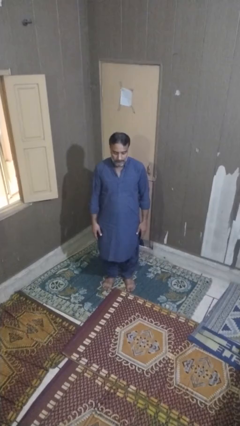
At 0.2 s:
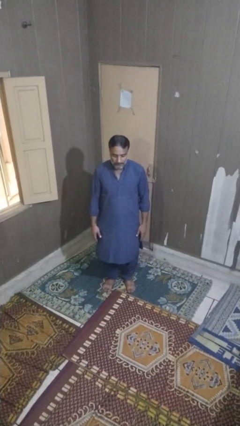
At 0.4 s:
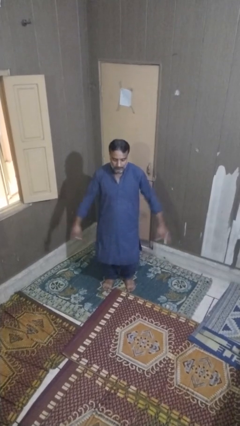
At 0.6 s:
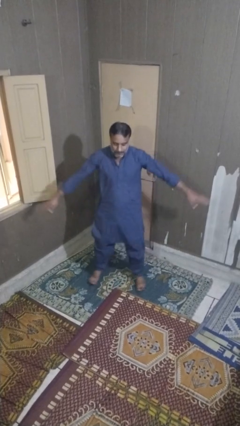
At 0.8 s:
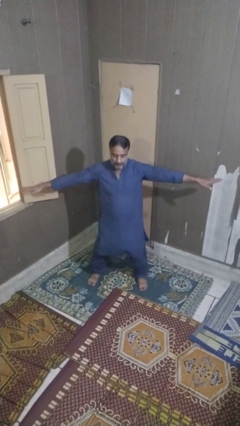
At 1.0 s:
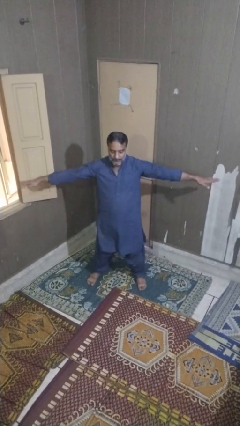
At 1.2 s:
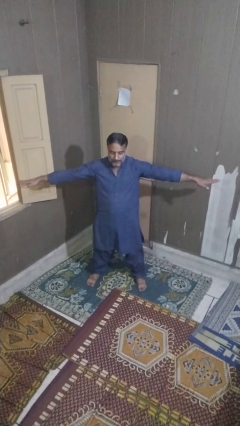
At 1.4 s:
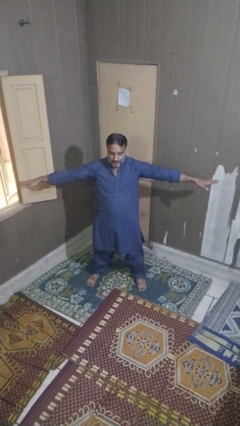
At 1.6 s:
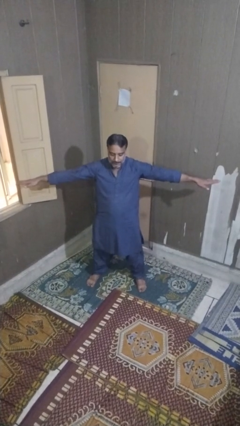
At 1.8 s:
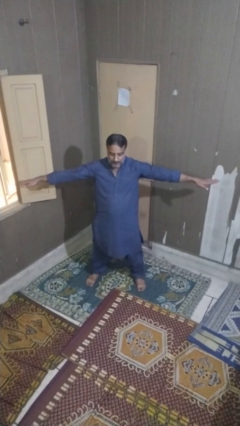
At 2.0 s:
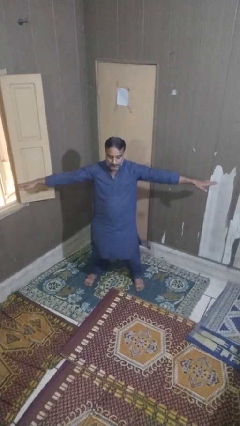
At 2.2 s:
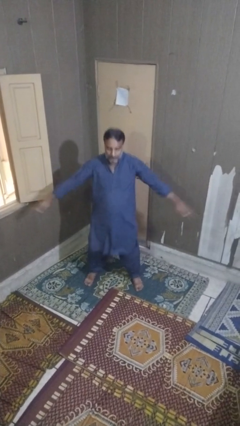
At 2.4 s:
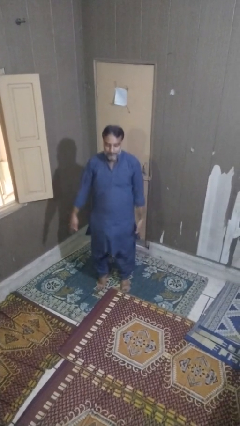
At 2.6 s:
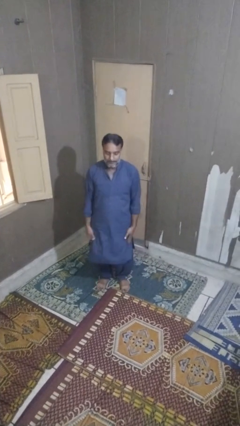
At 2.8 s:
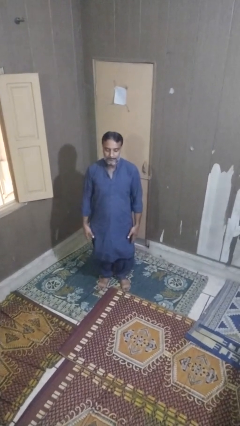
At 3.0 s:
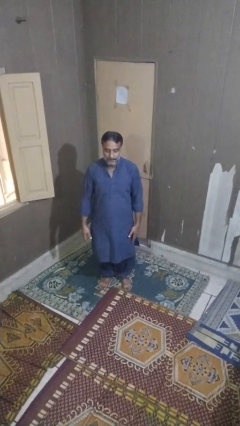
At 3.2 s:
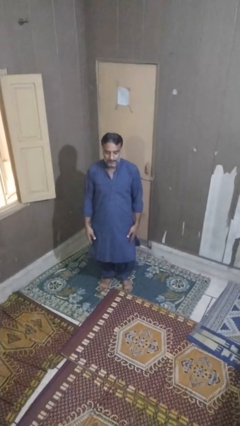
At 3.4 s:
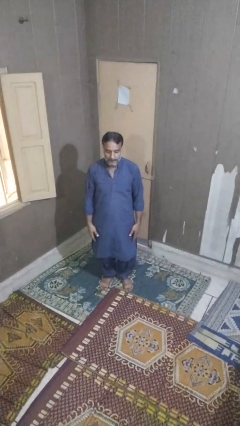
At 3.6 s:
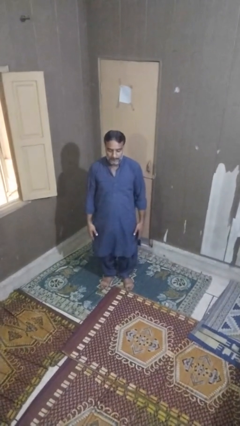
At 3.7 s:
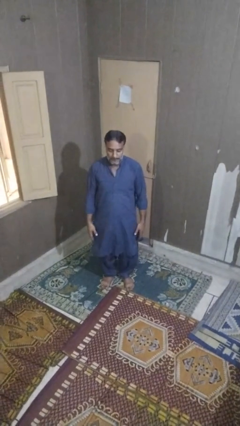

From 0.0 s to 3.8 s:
person exercises with jumping jacks

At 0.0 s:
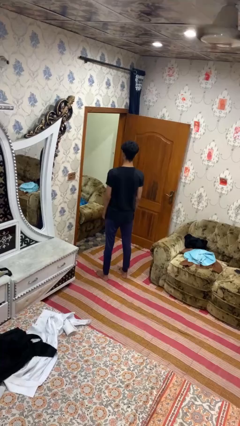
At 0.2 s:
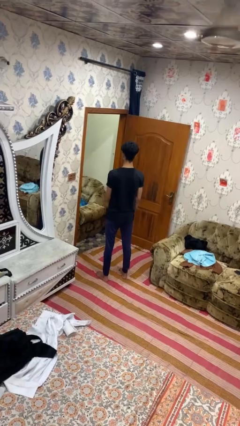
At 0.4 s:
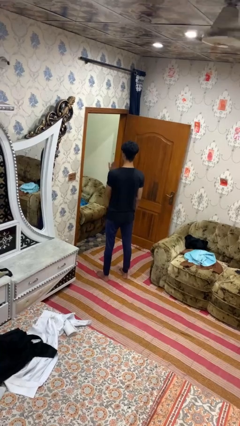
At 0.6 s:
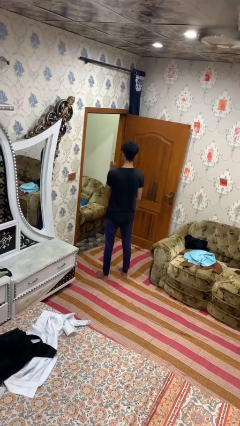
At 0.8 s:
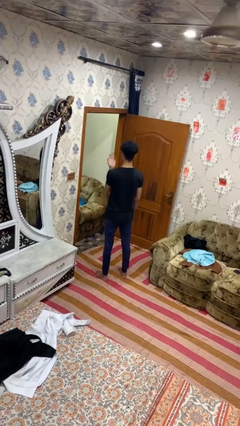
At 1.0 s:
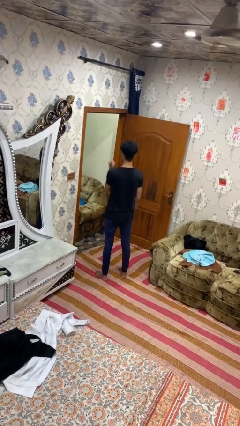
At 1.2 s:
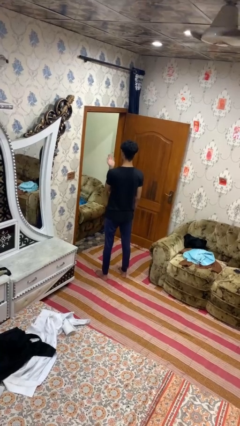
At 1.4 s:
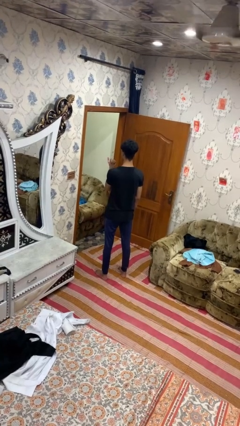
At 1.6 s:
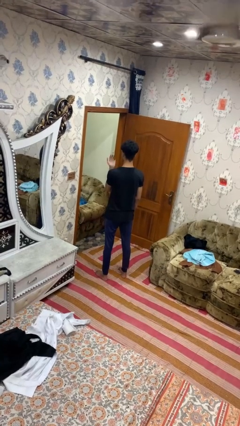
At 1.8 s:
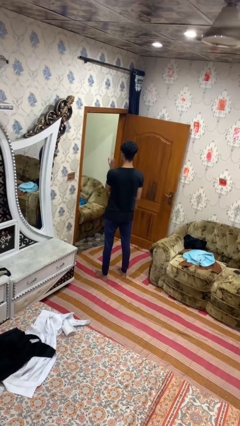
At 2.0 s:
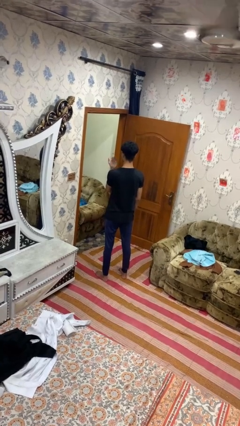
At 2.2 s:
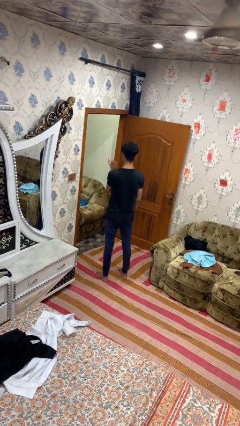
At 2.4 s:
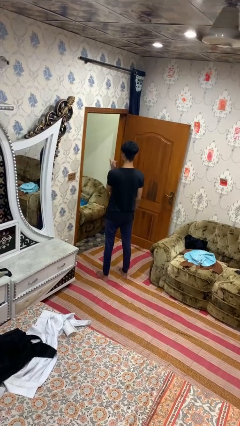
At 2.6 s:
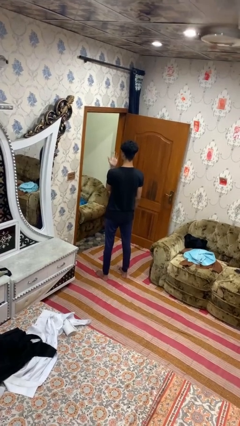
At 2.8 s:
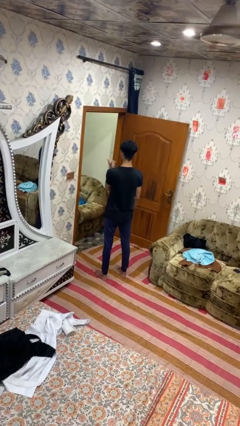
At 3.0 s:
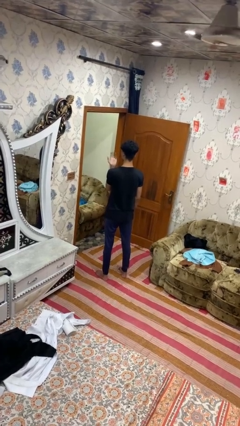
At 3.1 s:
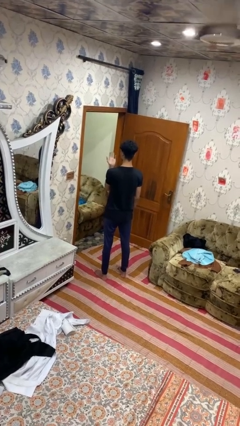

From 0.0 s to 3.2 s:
person gestures listen closely

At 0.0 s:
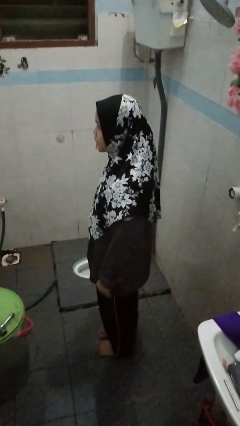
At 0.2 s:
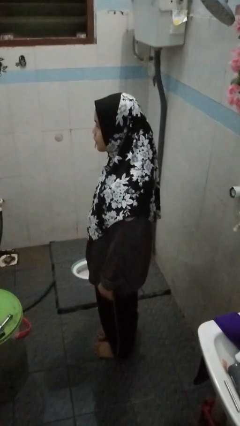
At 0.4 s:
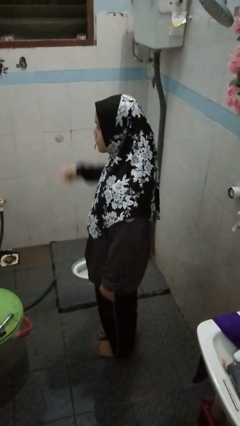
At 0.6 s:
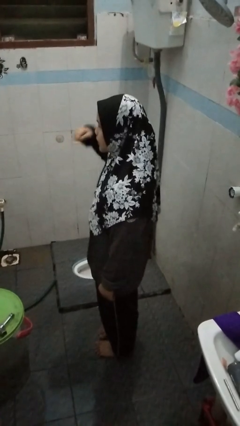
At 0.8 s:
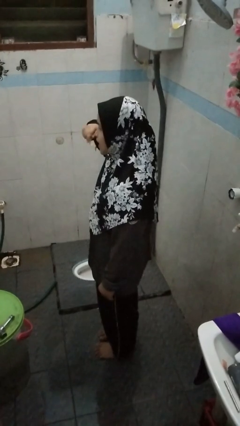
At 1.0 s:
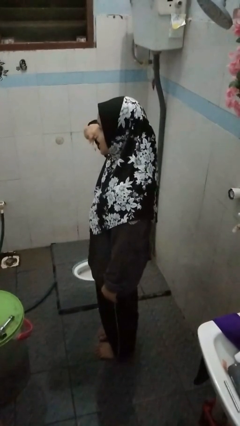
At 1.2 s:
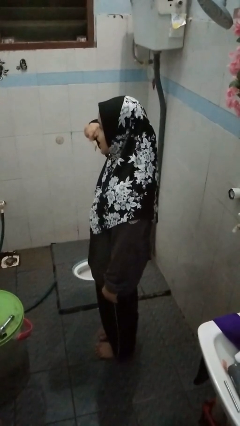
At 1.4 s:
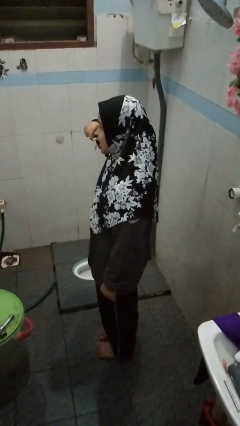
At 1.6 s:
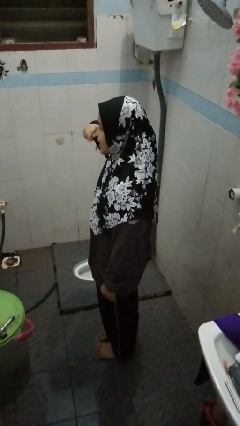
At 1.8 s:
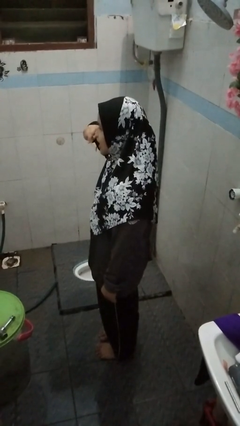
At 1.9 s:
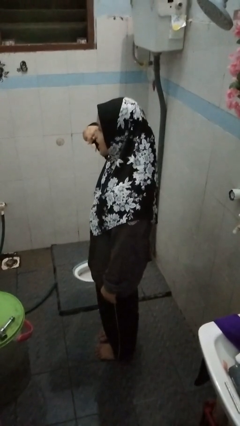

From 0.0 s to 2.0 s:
person brushes teeth

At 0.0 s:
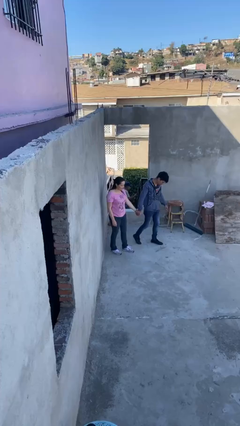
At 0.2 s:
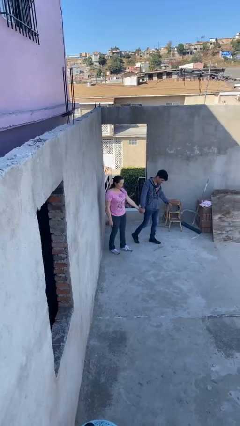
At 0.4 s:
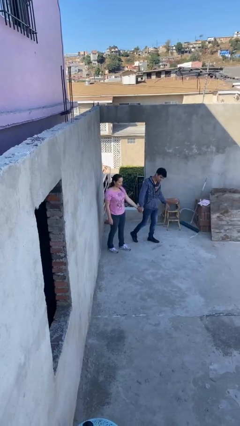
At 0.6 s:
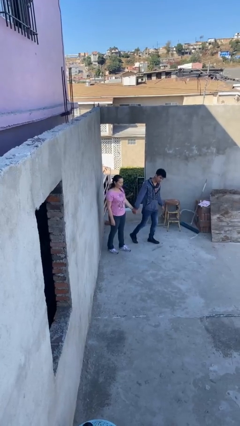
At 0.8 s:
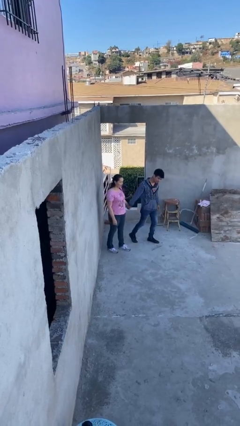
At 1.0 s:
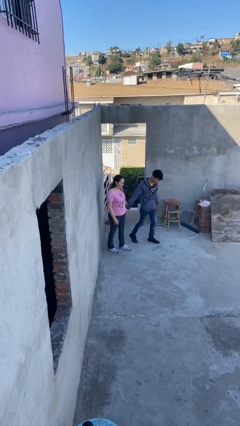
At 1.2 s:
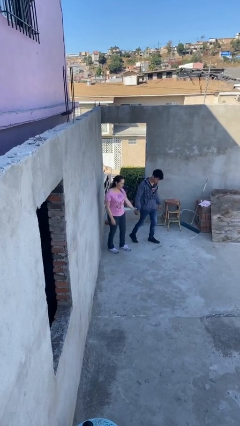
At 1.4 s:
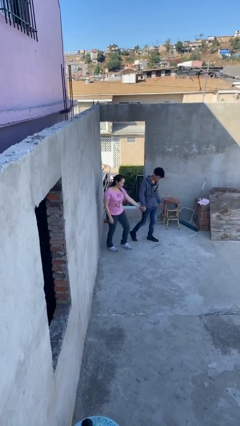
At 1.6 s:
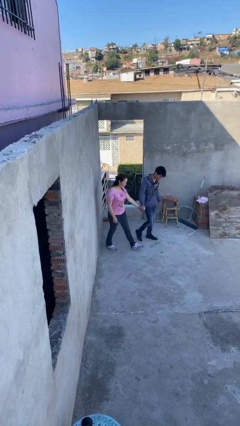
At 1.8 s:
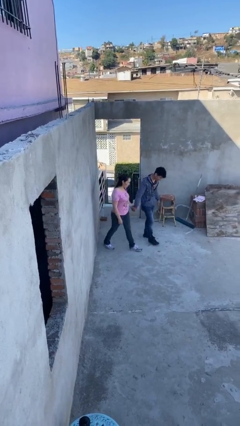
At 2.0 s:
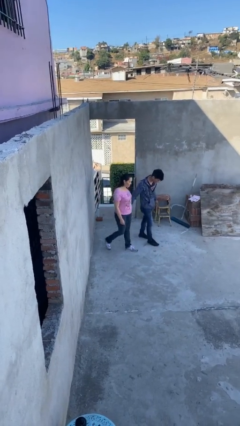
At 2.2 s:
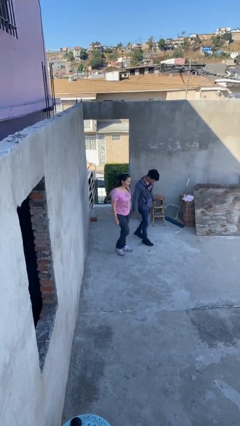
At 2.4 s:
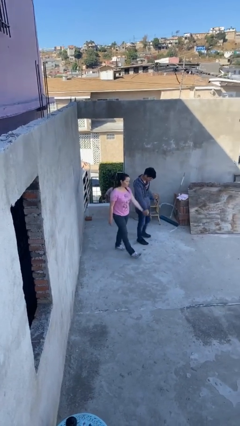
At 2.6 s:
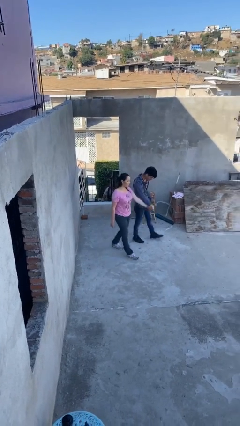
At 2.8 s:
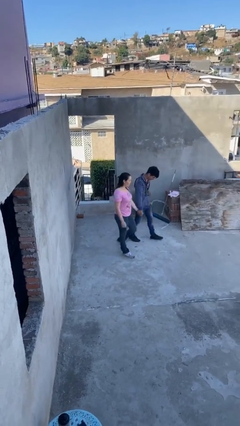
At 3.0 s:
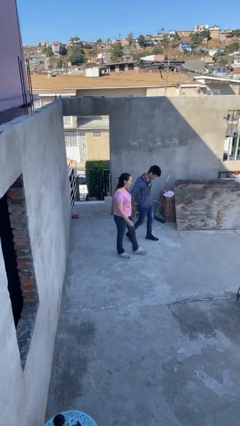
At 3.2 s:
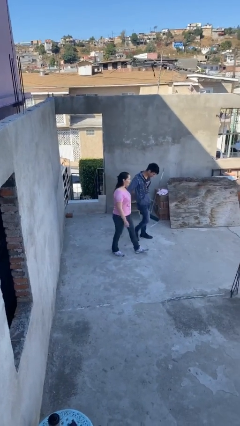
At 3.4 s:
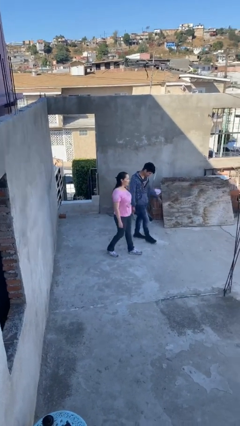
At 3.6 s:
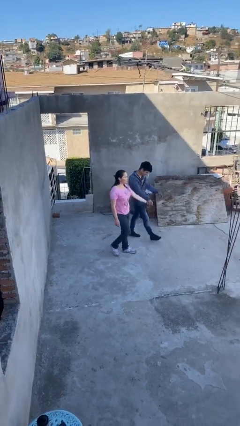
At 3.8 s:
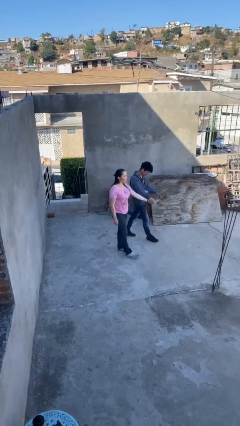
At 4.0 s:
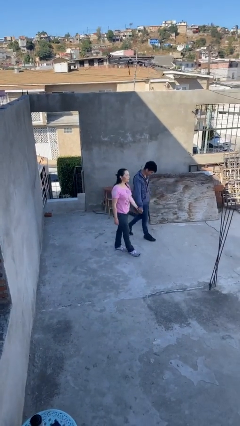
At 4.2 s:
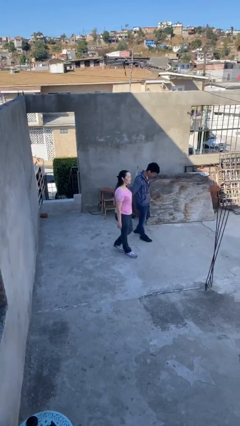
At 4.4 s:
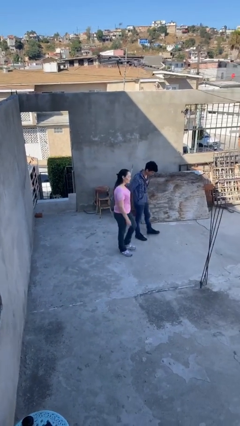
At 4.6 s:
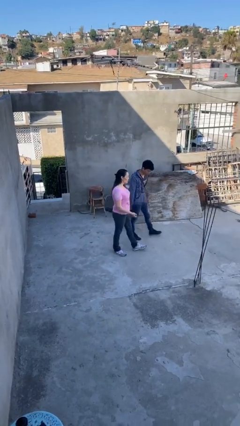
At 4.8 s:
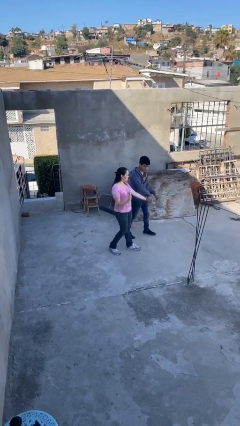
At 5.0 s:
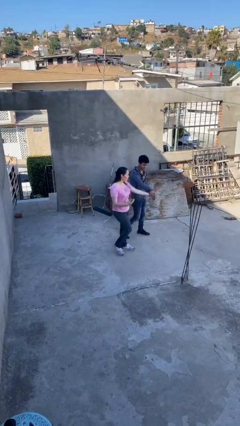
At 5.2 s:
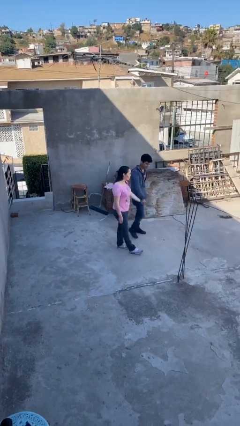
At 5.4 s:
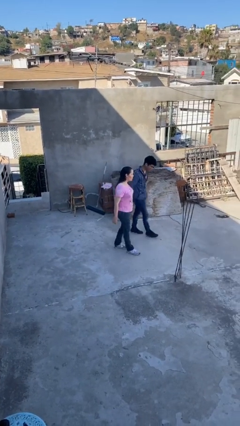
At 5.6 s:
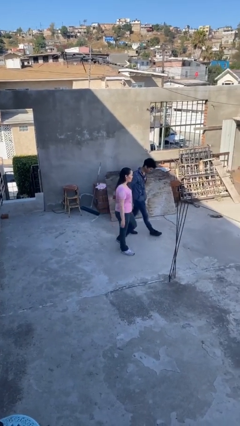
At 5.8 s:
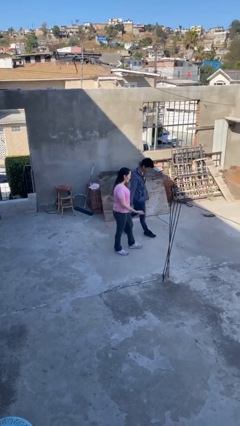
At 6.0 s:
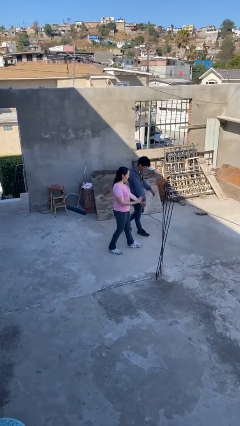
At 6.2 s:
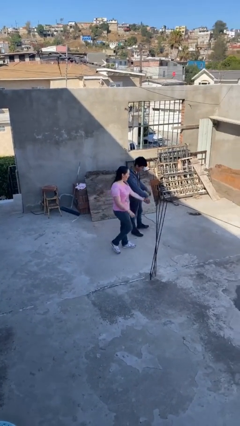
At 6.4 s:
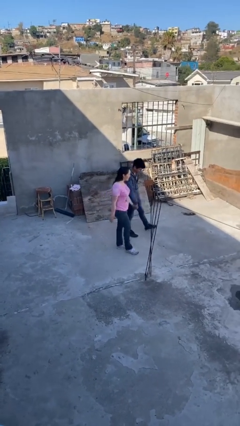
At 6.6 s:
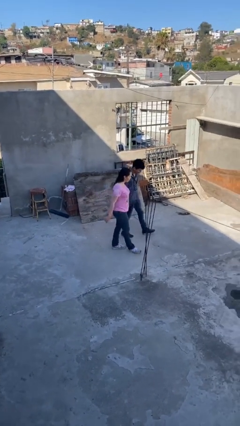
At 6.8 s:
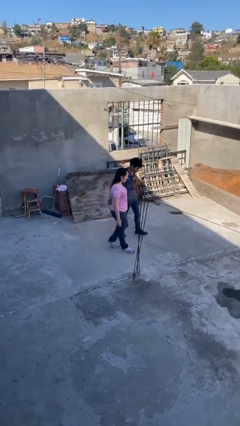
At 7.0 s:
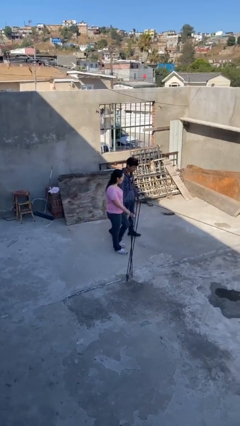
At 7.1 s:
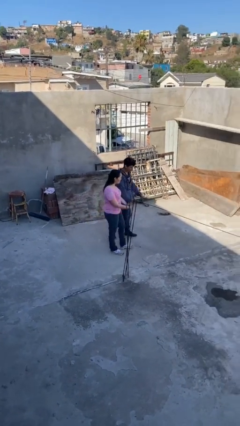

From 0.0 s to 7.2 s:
person holds hand

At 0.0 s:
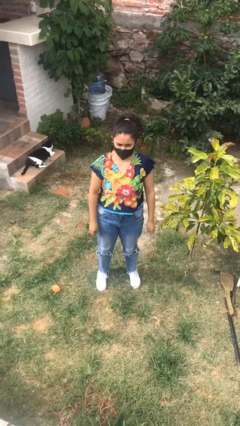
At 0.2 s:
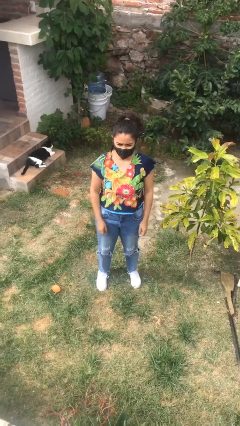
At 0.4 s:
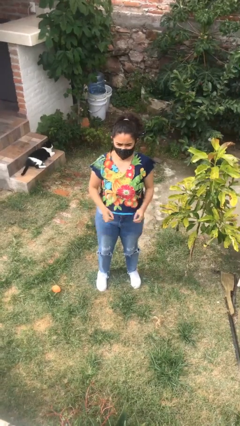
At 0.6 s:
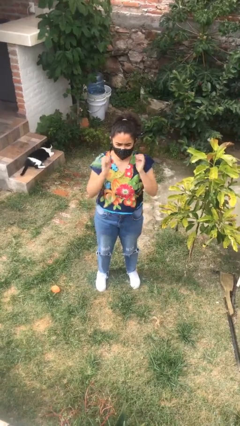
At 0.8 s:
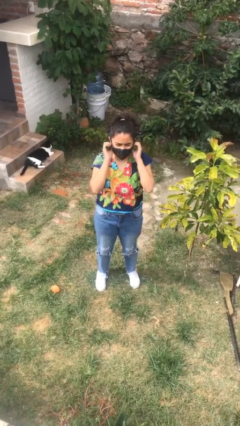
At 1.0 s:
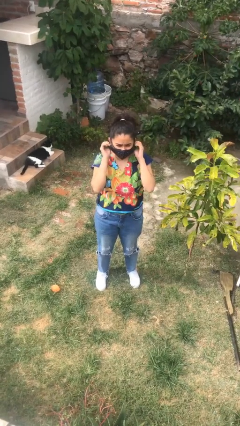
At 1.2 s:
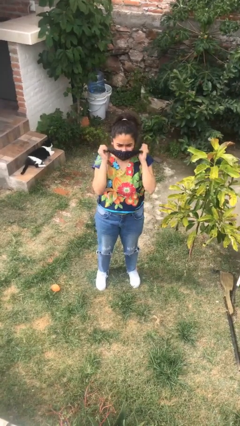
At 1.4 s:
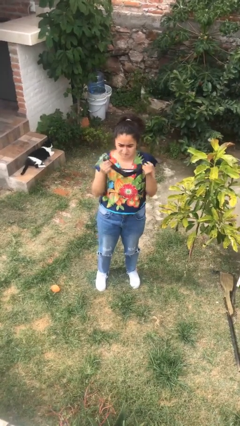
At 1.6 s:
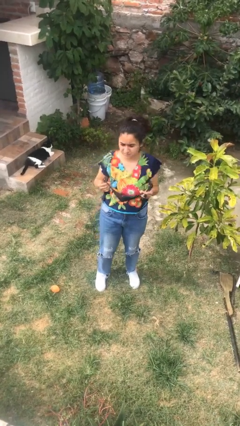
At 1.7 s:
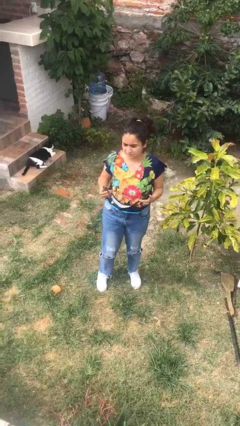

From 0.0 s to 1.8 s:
person takes off facemask
